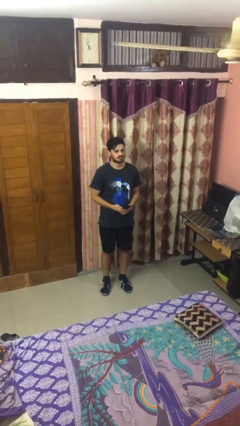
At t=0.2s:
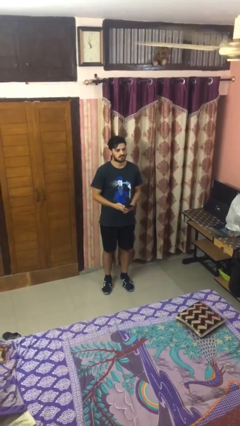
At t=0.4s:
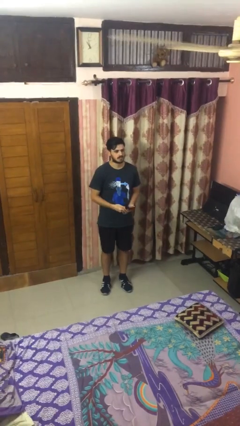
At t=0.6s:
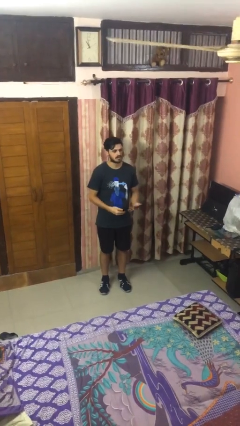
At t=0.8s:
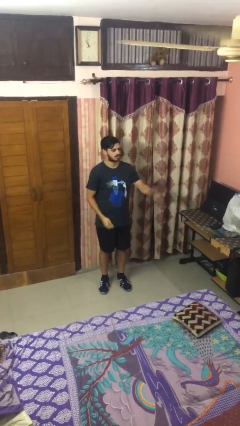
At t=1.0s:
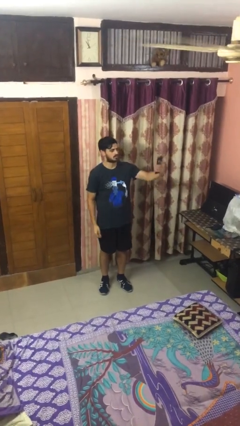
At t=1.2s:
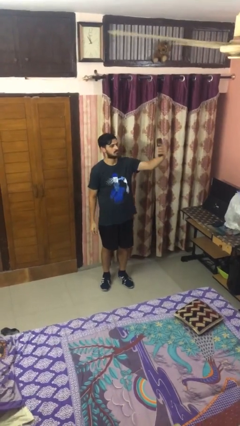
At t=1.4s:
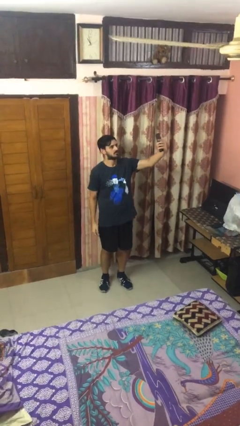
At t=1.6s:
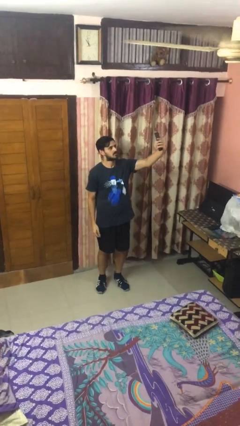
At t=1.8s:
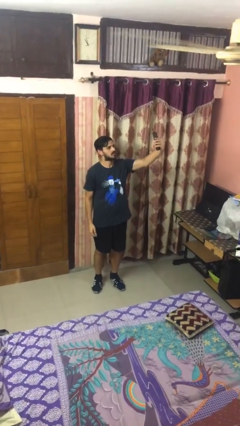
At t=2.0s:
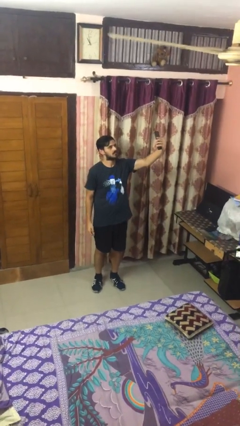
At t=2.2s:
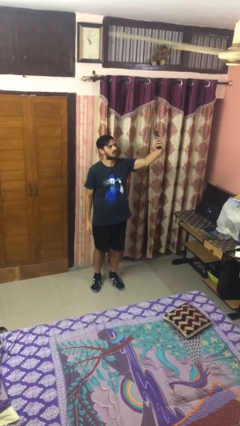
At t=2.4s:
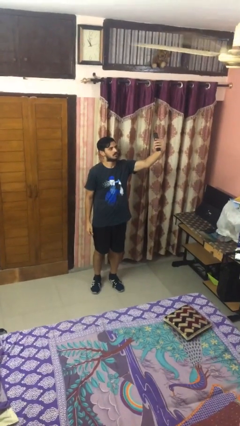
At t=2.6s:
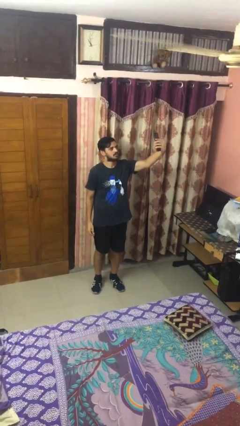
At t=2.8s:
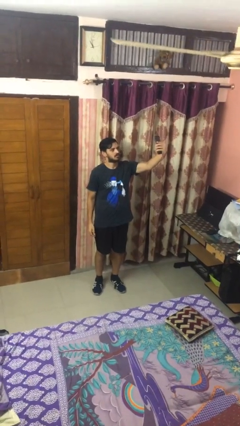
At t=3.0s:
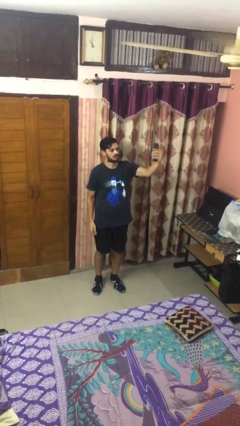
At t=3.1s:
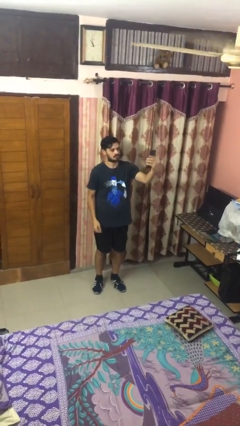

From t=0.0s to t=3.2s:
person takes selfie

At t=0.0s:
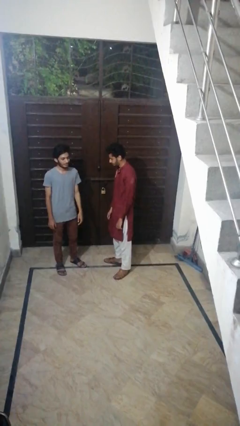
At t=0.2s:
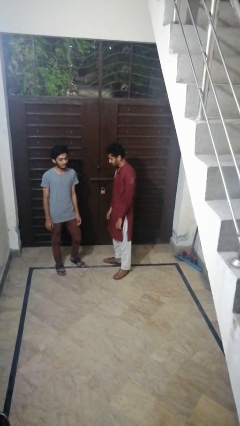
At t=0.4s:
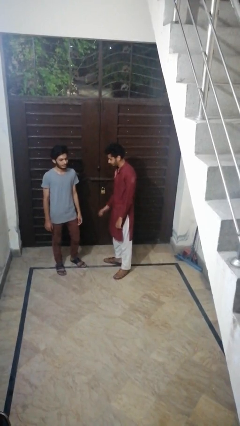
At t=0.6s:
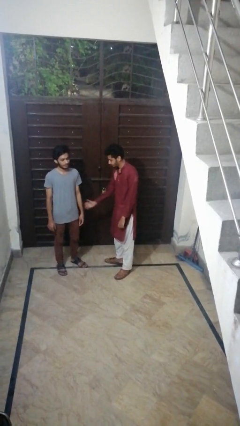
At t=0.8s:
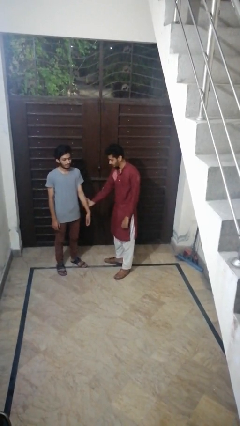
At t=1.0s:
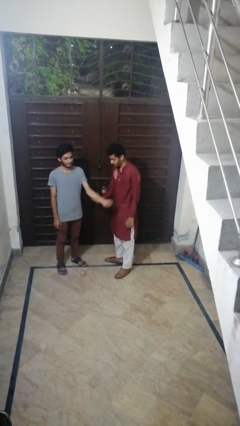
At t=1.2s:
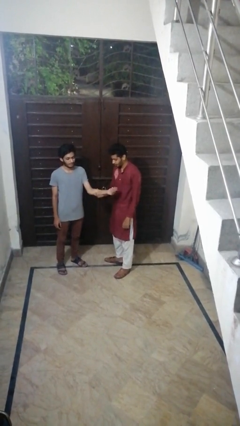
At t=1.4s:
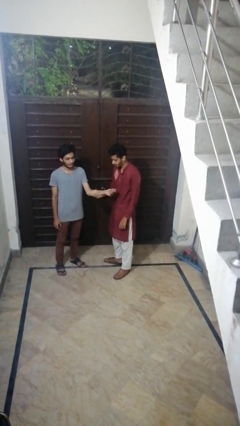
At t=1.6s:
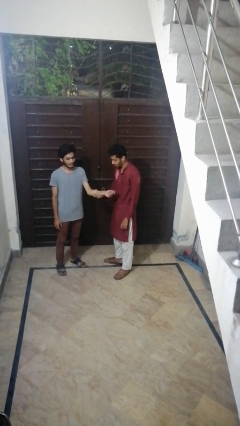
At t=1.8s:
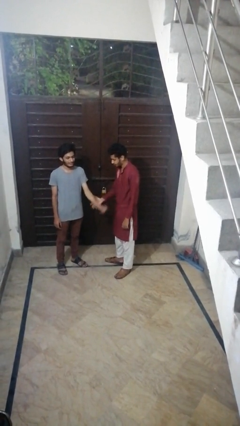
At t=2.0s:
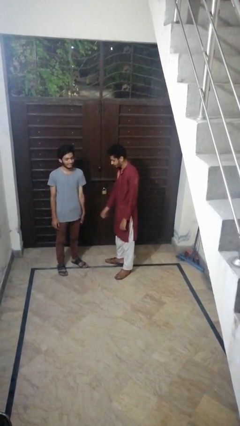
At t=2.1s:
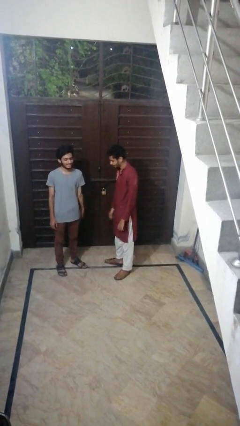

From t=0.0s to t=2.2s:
person grabs person by forearm

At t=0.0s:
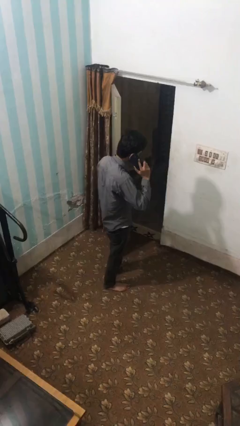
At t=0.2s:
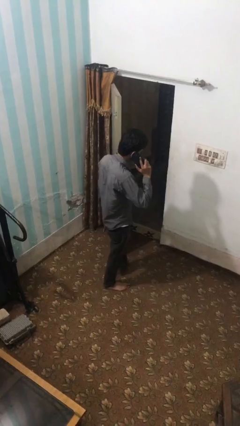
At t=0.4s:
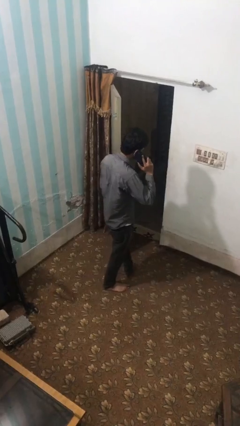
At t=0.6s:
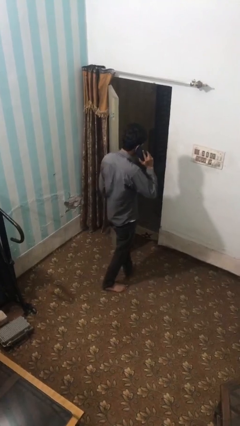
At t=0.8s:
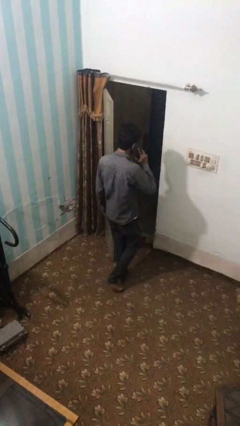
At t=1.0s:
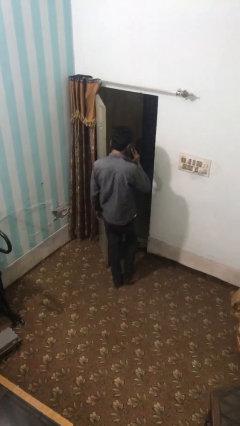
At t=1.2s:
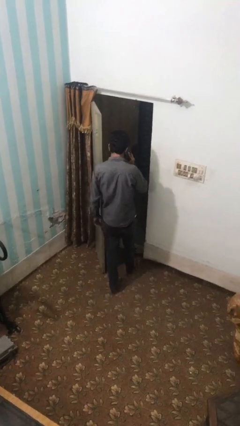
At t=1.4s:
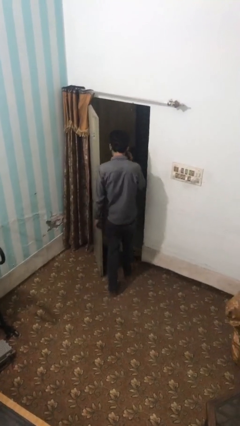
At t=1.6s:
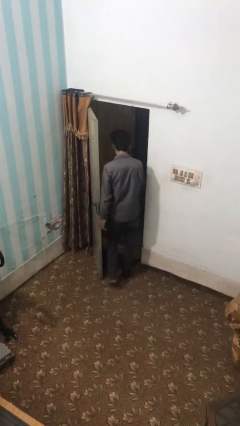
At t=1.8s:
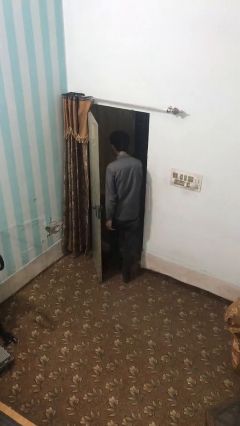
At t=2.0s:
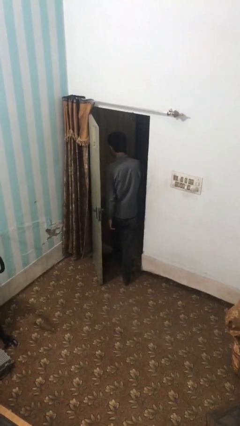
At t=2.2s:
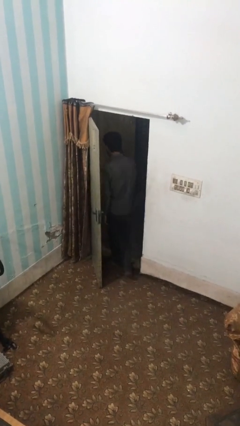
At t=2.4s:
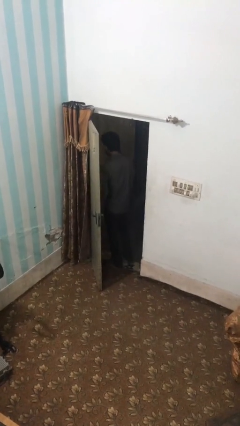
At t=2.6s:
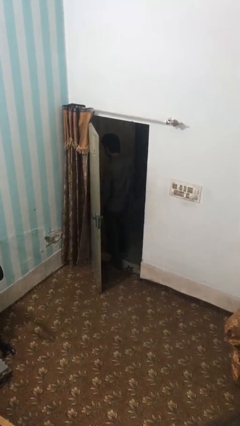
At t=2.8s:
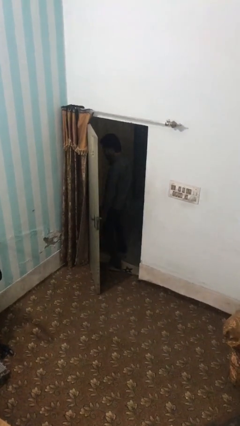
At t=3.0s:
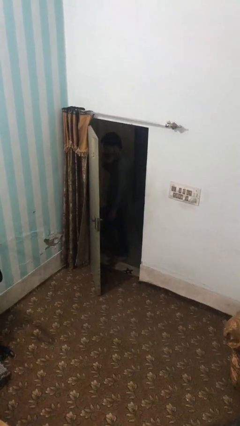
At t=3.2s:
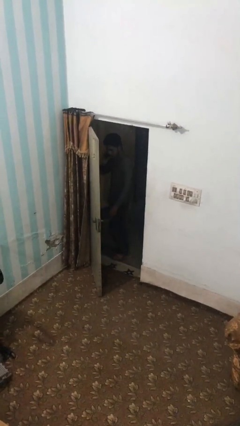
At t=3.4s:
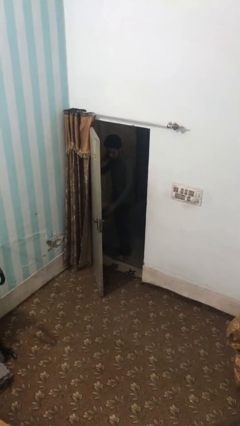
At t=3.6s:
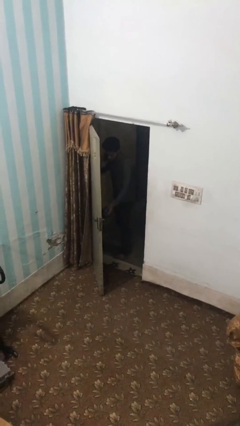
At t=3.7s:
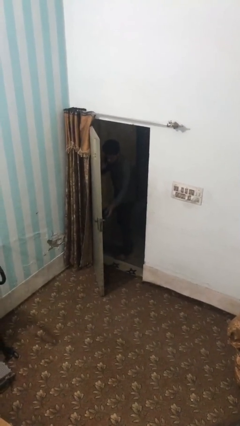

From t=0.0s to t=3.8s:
person exits scene through structure

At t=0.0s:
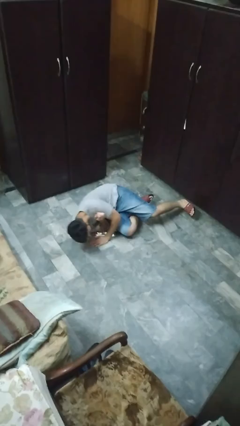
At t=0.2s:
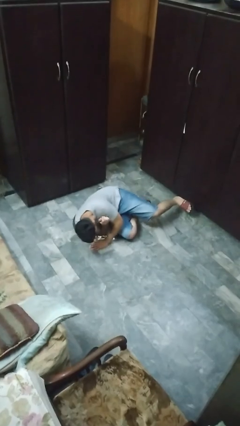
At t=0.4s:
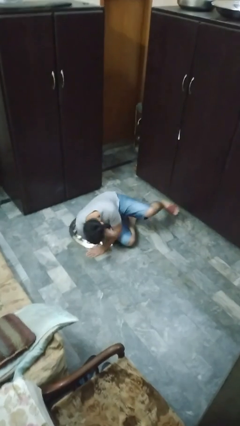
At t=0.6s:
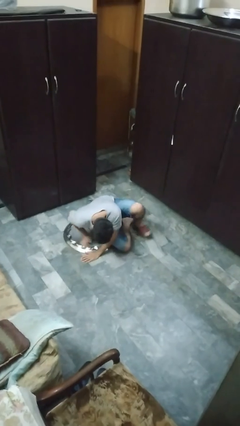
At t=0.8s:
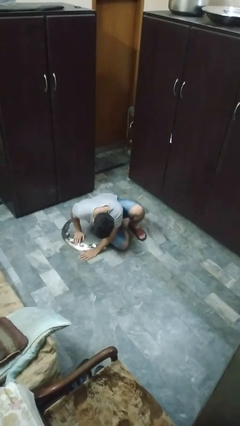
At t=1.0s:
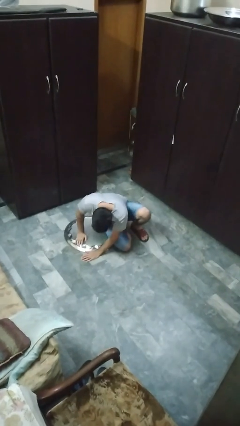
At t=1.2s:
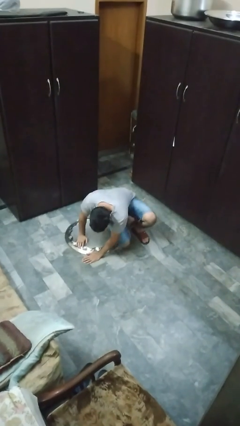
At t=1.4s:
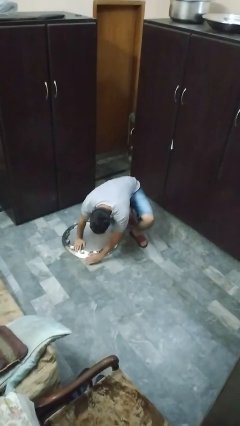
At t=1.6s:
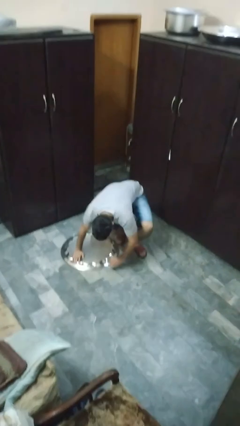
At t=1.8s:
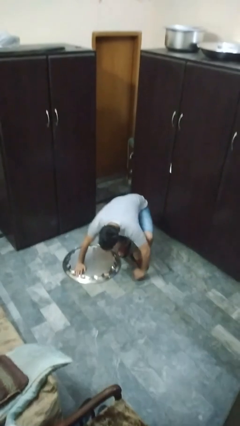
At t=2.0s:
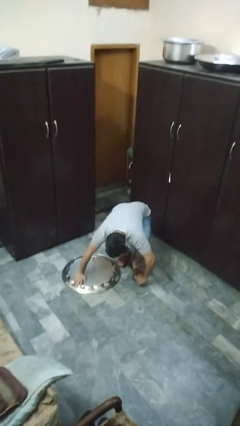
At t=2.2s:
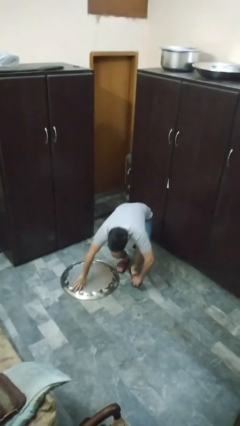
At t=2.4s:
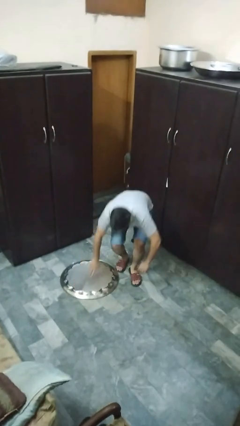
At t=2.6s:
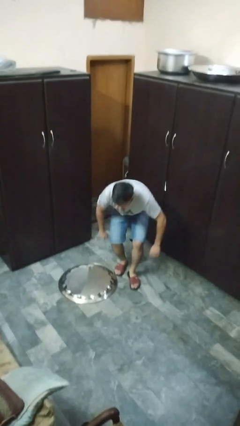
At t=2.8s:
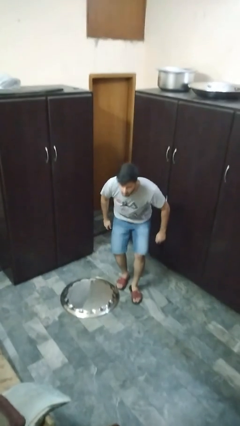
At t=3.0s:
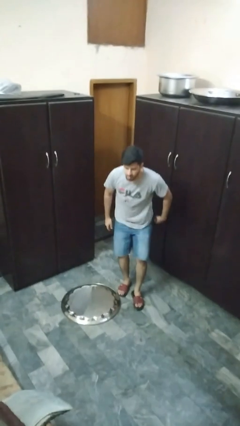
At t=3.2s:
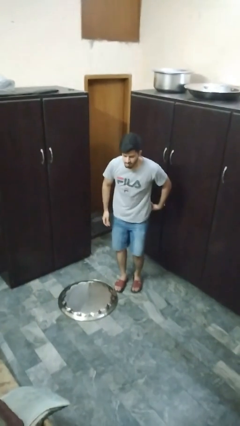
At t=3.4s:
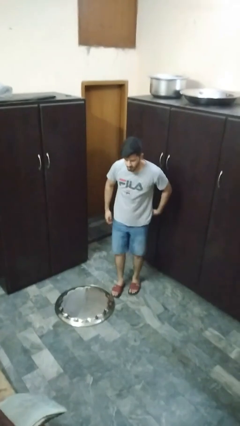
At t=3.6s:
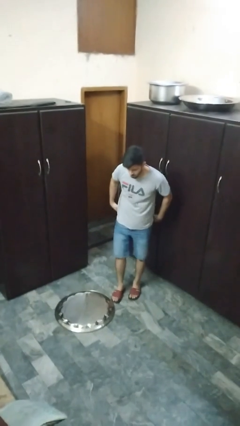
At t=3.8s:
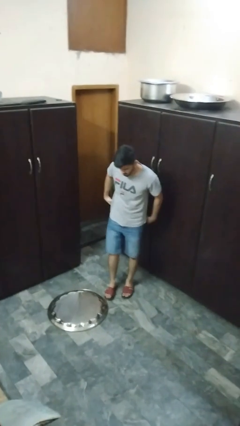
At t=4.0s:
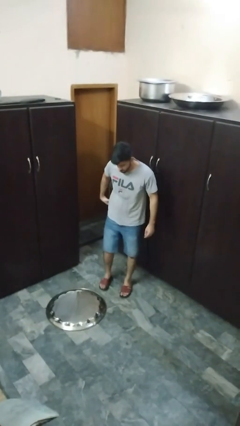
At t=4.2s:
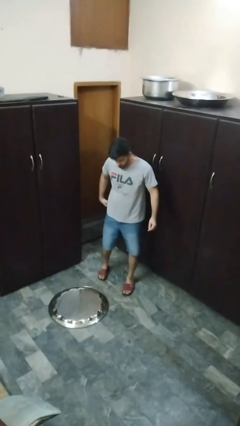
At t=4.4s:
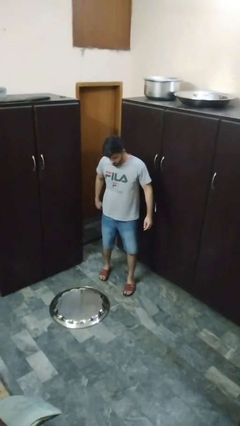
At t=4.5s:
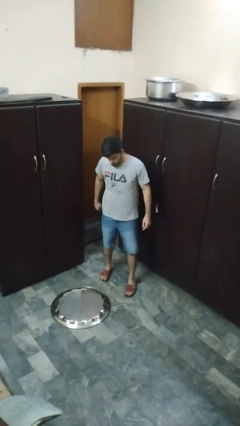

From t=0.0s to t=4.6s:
person stands up from floor

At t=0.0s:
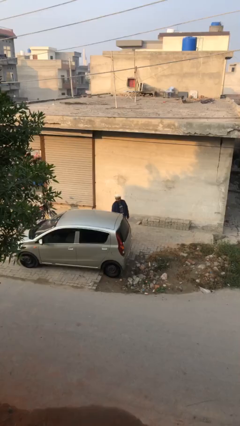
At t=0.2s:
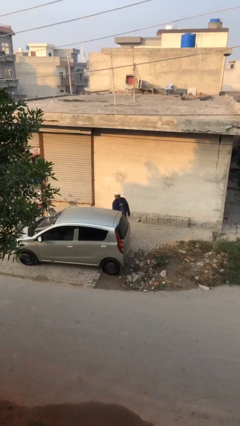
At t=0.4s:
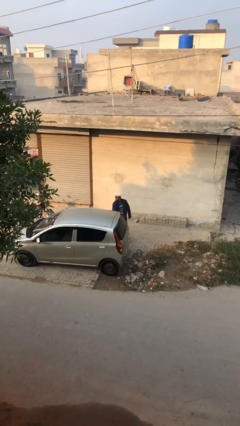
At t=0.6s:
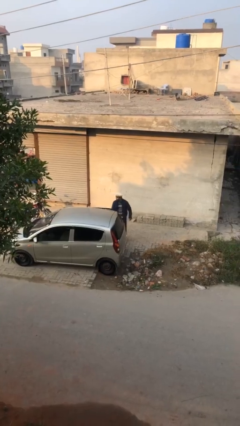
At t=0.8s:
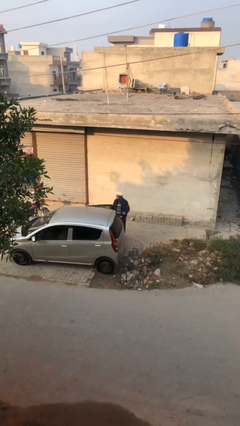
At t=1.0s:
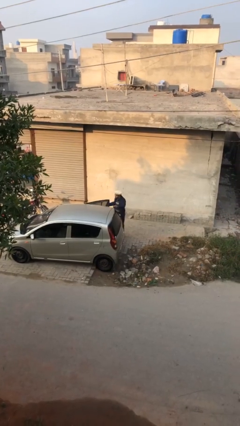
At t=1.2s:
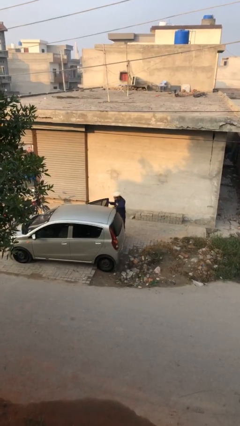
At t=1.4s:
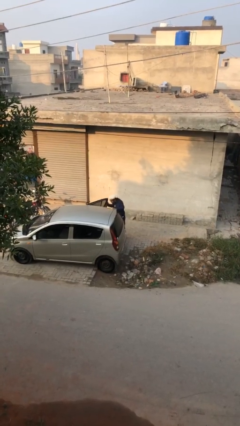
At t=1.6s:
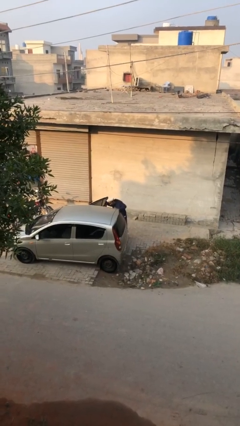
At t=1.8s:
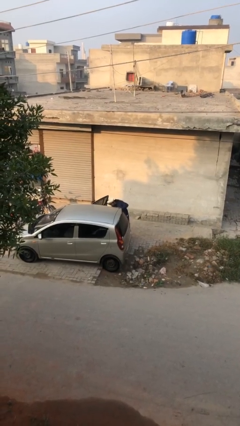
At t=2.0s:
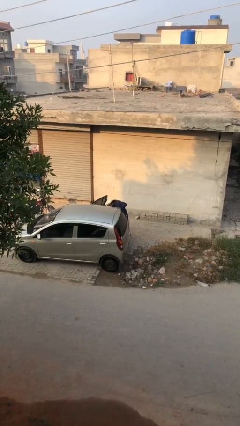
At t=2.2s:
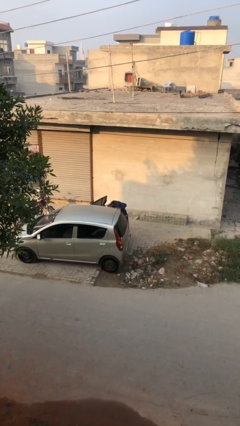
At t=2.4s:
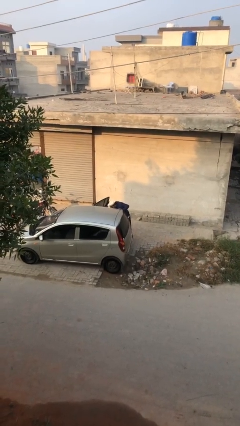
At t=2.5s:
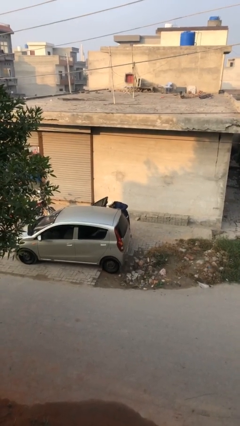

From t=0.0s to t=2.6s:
person opens car door

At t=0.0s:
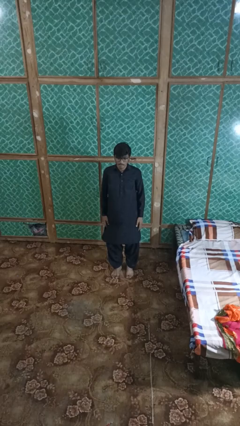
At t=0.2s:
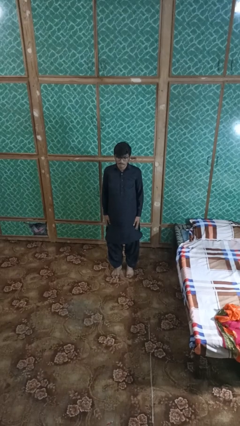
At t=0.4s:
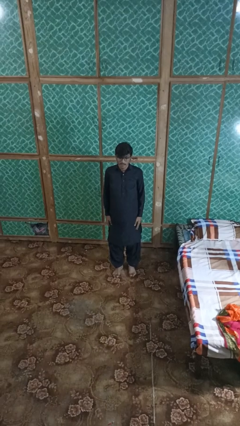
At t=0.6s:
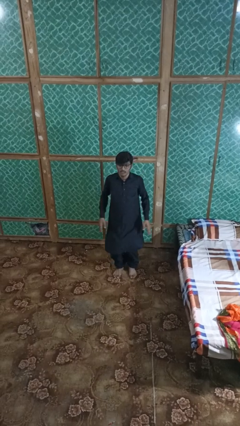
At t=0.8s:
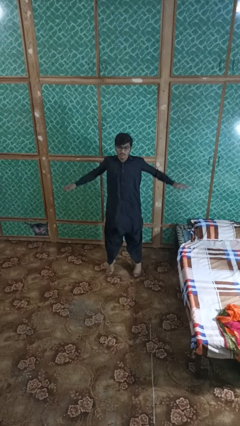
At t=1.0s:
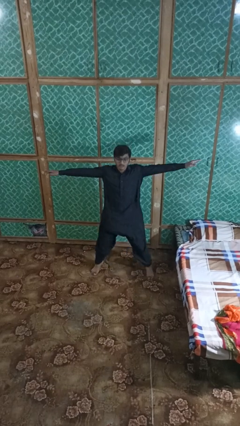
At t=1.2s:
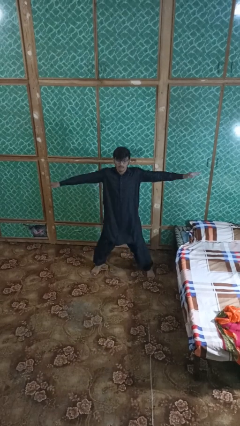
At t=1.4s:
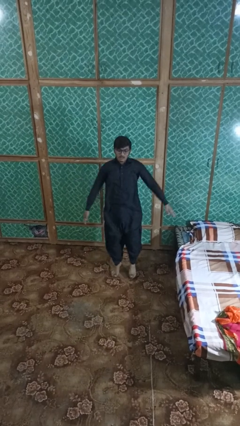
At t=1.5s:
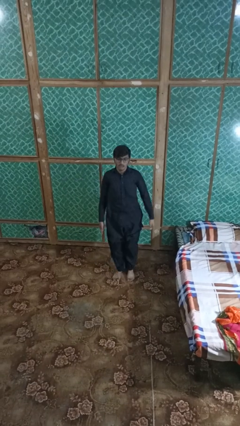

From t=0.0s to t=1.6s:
person exercises with jumping jacks
